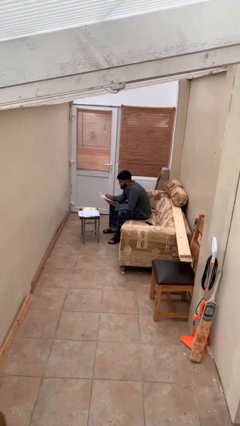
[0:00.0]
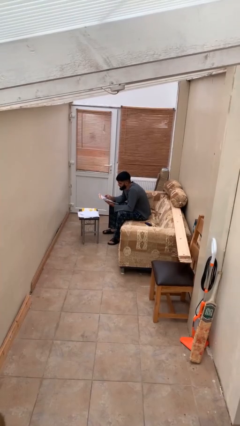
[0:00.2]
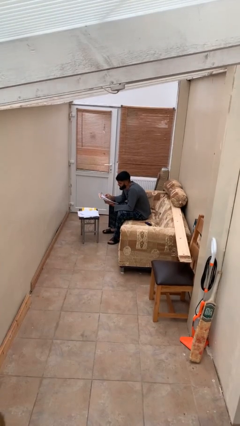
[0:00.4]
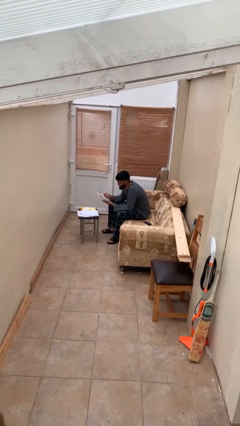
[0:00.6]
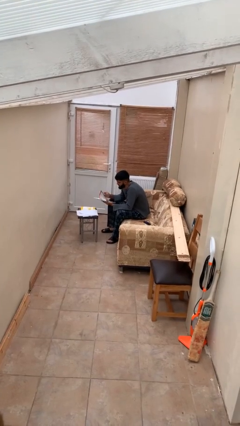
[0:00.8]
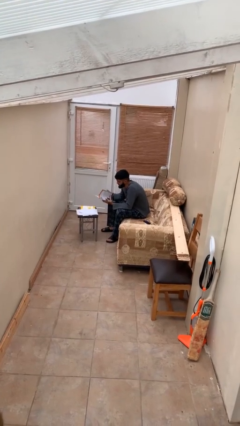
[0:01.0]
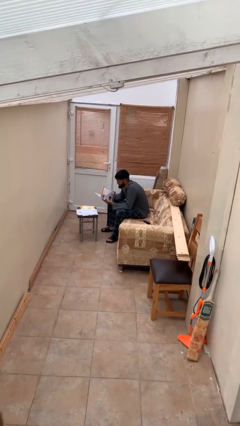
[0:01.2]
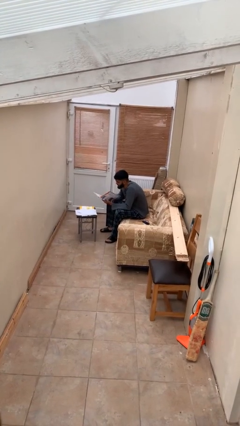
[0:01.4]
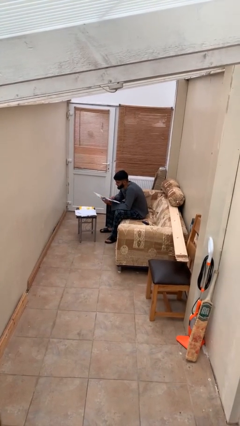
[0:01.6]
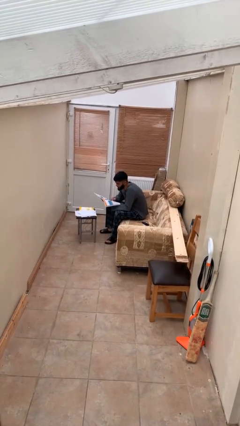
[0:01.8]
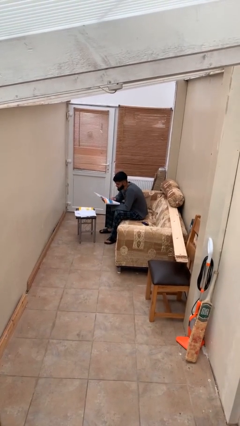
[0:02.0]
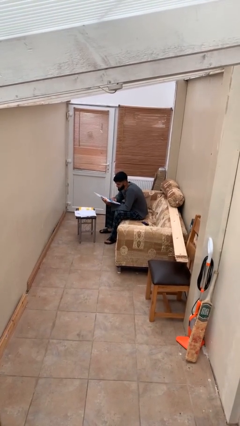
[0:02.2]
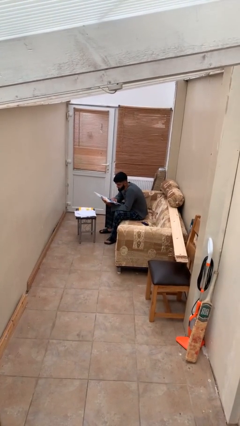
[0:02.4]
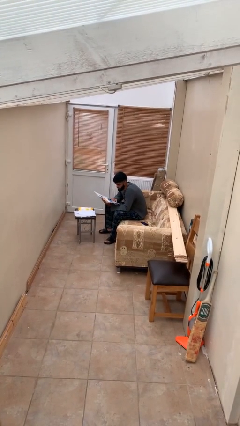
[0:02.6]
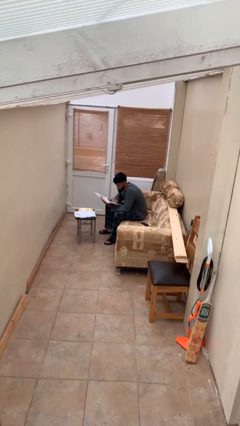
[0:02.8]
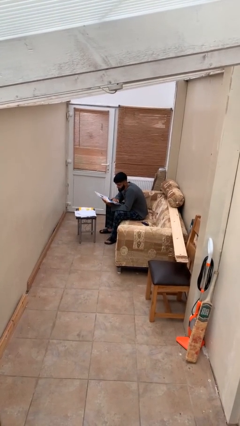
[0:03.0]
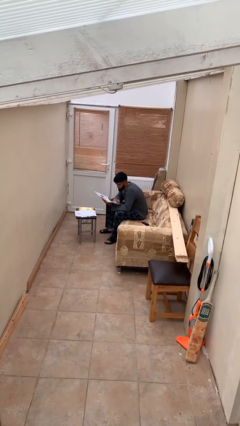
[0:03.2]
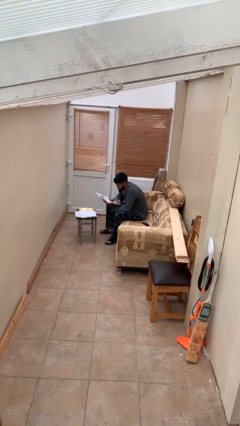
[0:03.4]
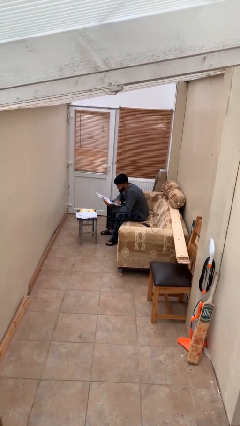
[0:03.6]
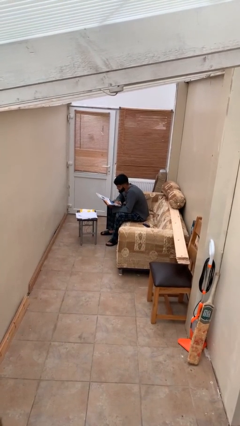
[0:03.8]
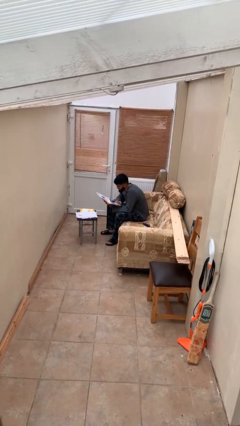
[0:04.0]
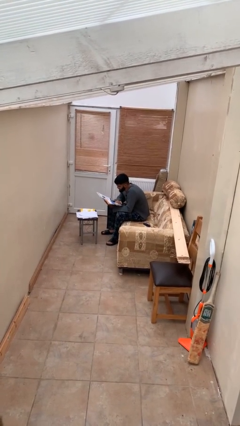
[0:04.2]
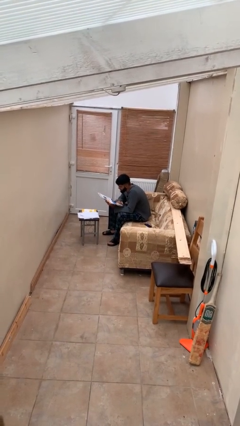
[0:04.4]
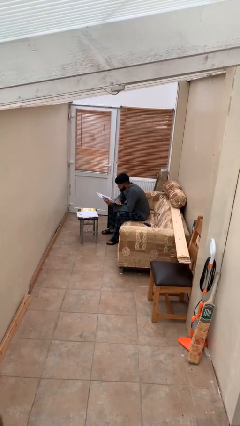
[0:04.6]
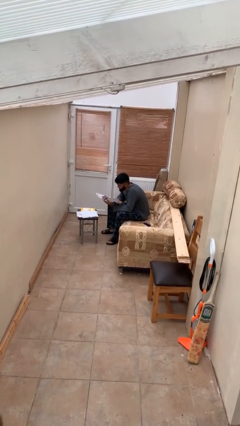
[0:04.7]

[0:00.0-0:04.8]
person reads document

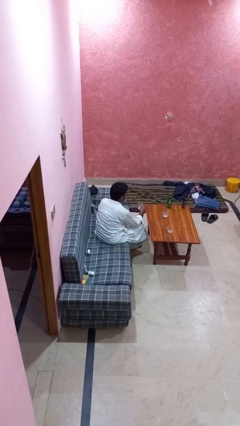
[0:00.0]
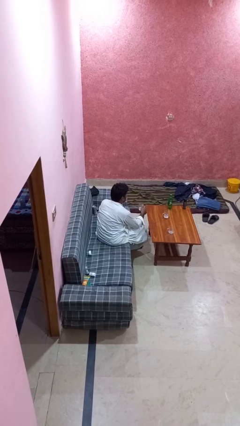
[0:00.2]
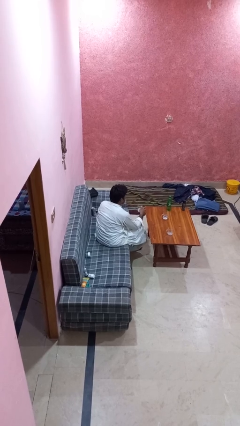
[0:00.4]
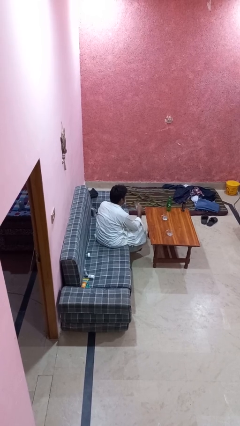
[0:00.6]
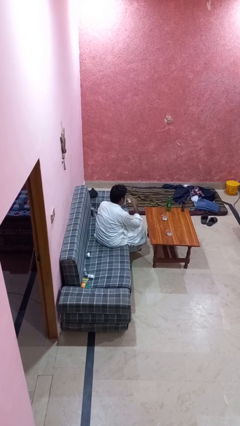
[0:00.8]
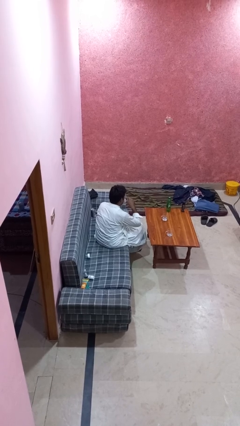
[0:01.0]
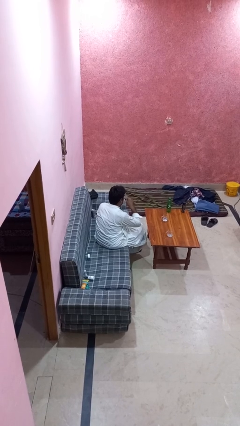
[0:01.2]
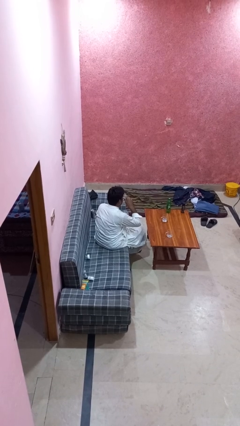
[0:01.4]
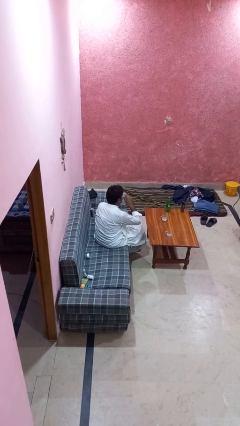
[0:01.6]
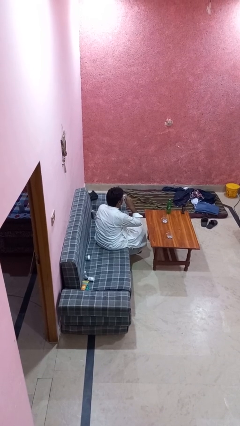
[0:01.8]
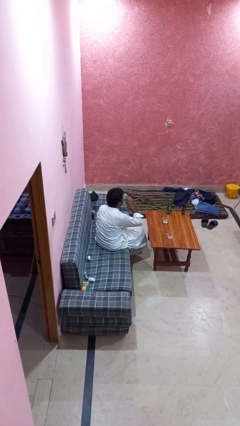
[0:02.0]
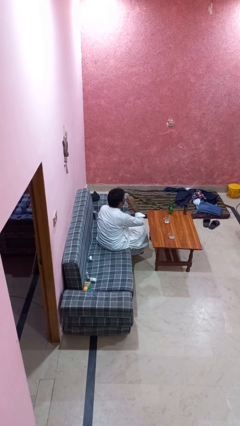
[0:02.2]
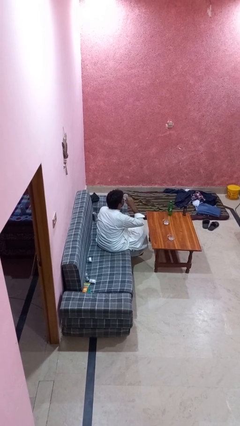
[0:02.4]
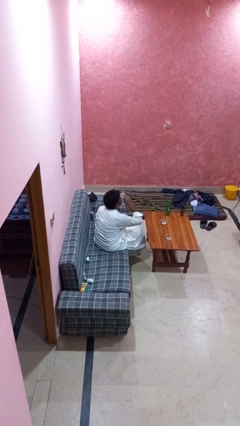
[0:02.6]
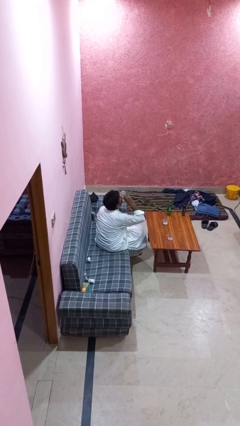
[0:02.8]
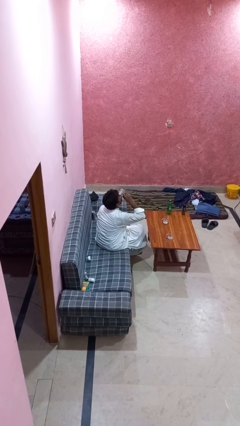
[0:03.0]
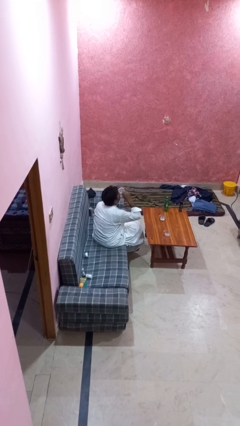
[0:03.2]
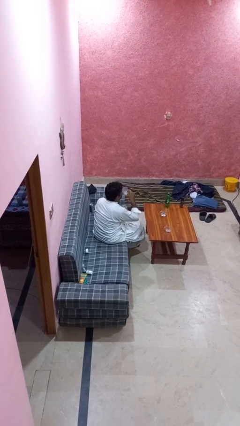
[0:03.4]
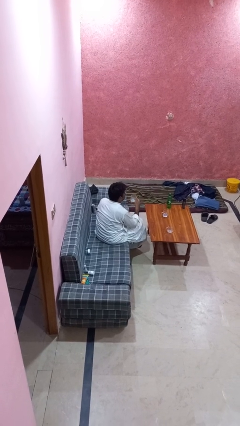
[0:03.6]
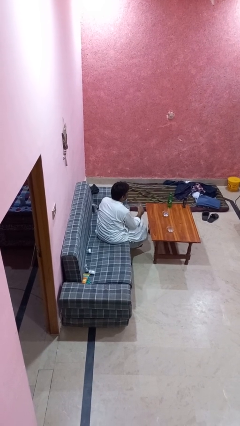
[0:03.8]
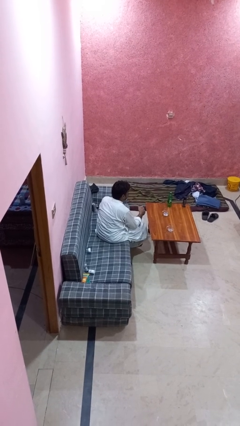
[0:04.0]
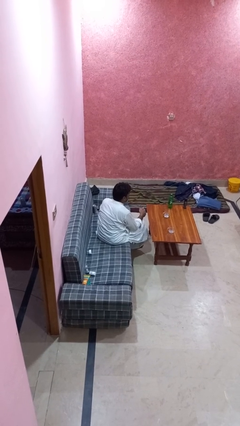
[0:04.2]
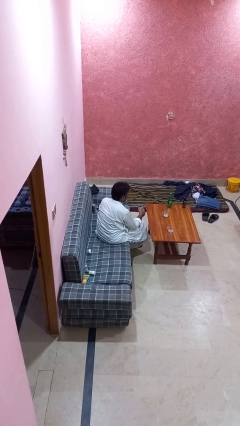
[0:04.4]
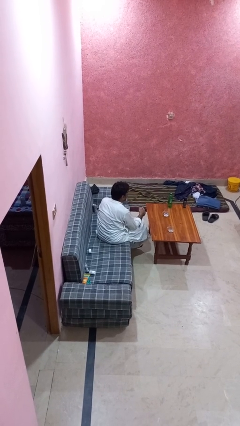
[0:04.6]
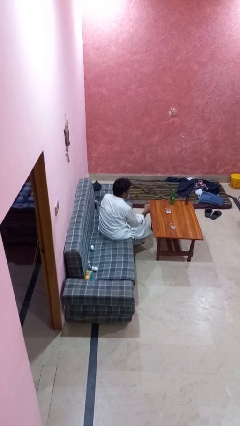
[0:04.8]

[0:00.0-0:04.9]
person drinks from shotglass

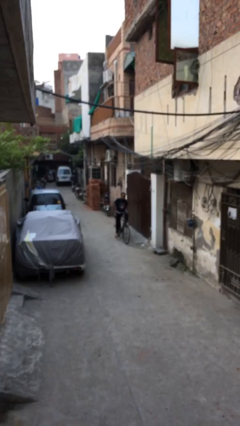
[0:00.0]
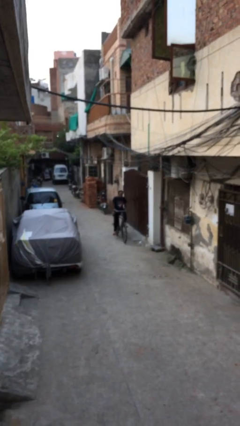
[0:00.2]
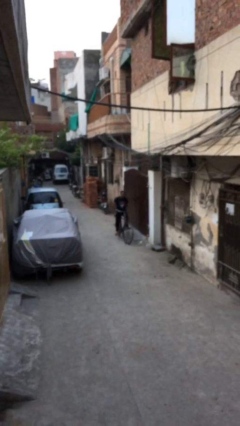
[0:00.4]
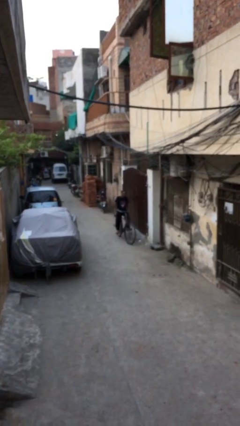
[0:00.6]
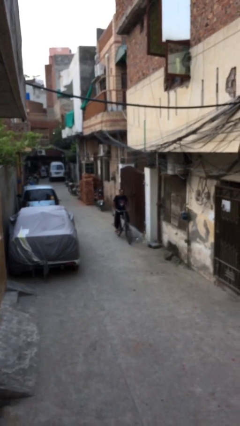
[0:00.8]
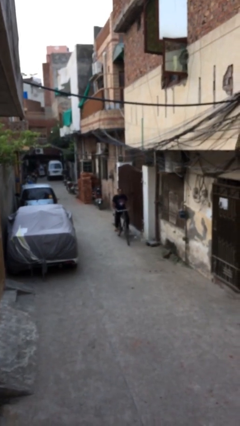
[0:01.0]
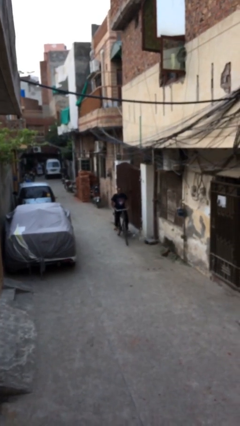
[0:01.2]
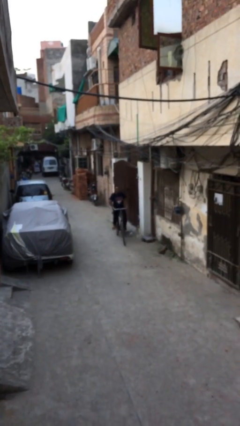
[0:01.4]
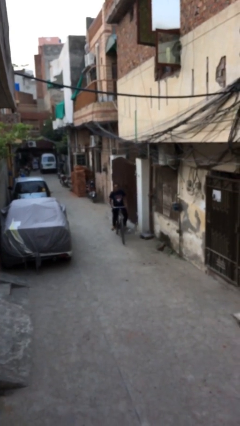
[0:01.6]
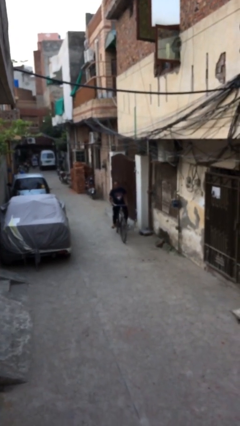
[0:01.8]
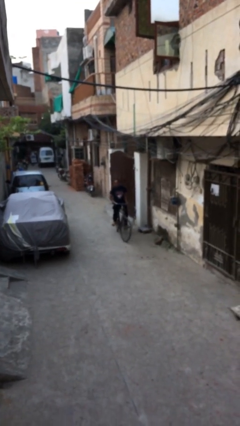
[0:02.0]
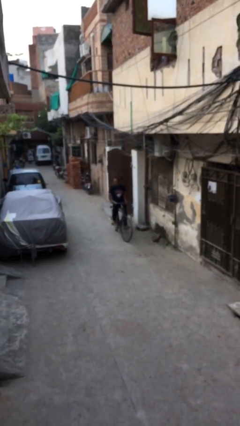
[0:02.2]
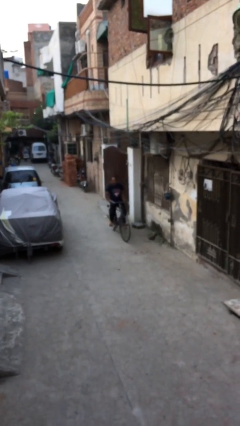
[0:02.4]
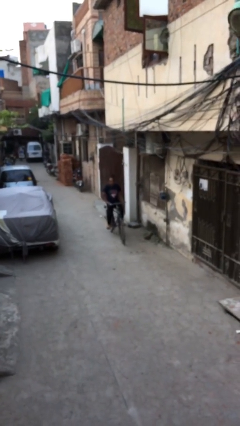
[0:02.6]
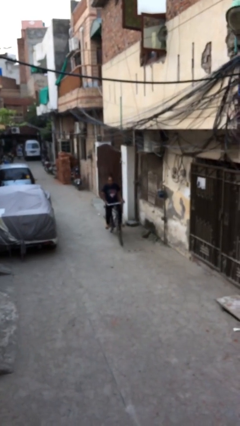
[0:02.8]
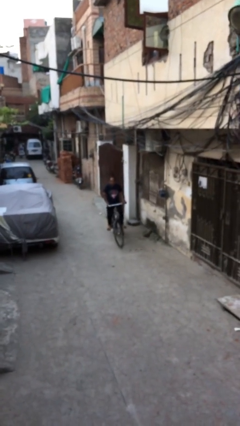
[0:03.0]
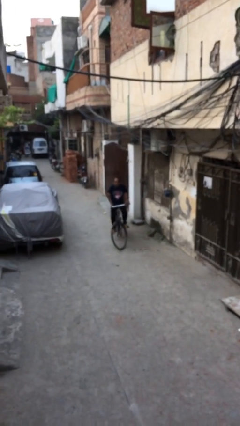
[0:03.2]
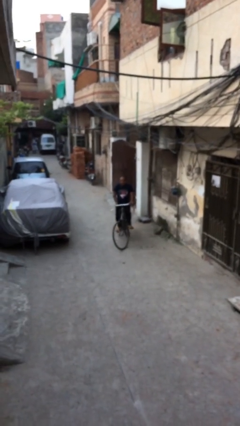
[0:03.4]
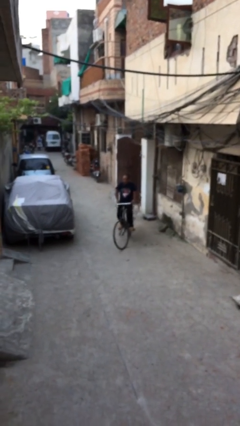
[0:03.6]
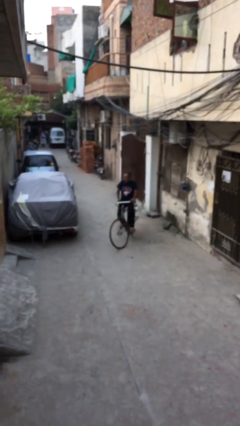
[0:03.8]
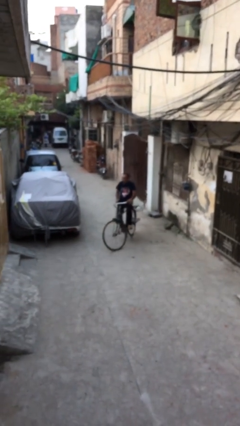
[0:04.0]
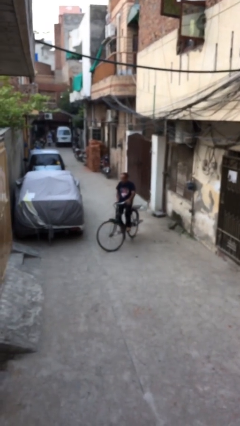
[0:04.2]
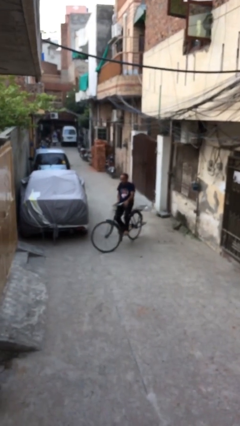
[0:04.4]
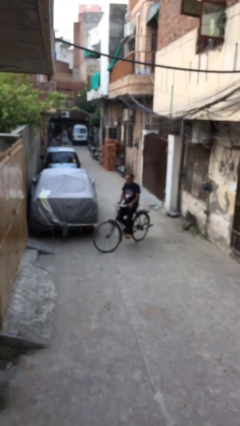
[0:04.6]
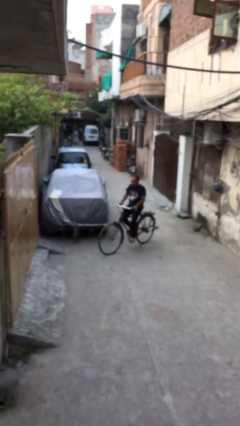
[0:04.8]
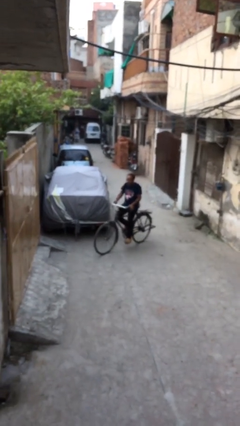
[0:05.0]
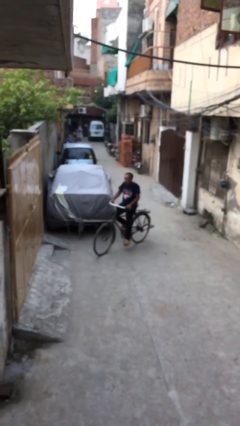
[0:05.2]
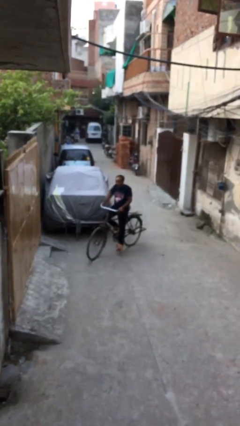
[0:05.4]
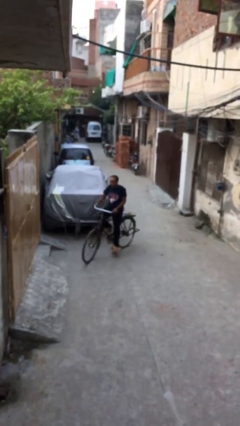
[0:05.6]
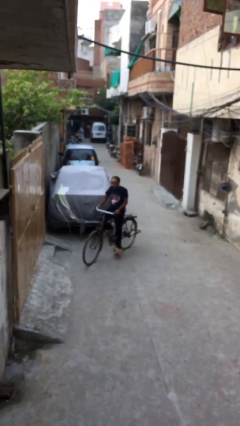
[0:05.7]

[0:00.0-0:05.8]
person rides bicycle

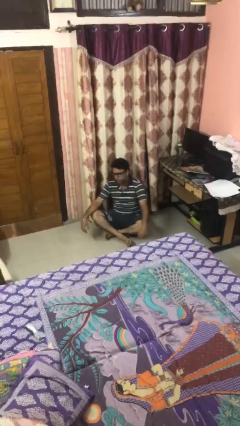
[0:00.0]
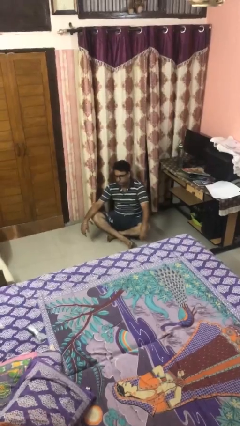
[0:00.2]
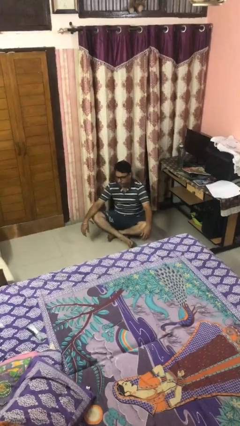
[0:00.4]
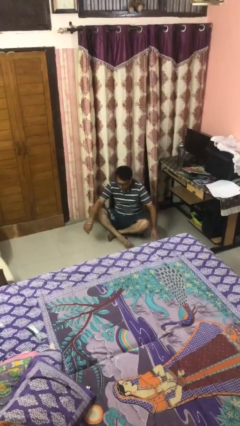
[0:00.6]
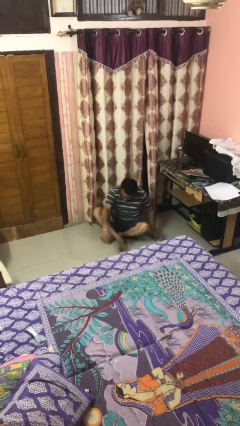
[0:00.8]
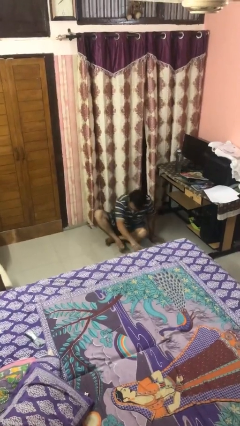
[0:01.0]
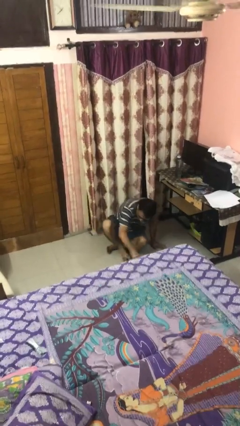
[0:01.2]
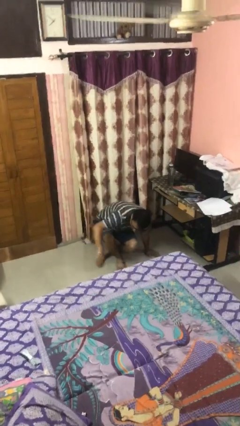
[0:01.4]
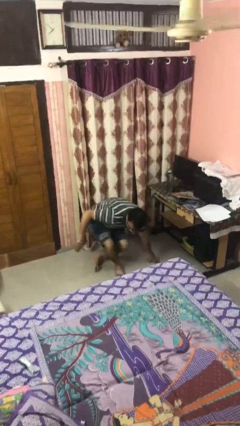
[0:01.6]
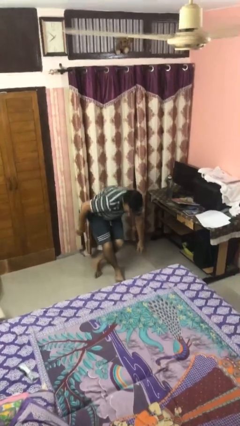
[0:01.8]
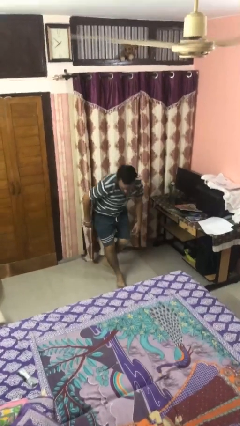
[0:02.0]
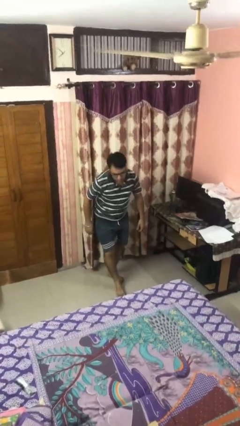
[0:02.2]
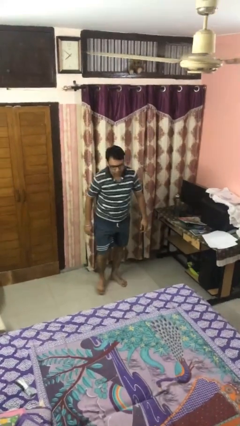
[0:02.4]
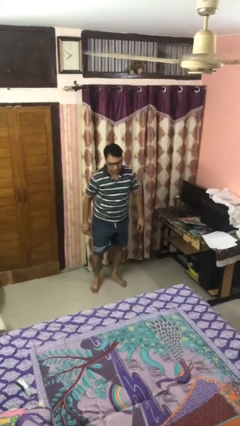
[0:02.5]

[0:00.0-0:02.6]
person stands up from floor
